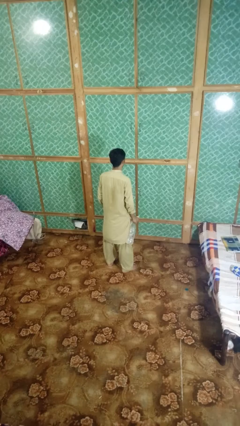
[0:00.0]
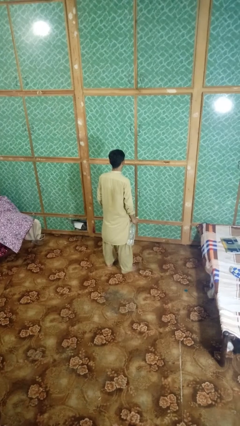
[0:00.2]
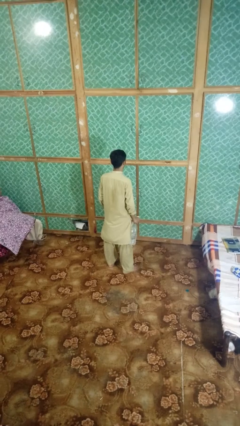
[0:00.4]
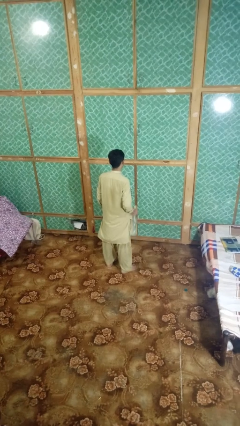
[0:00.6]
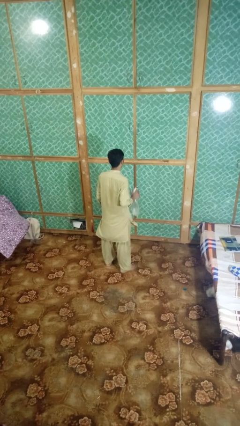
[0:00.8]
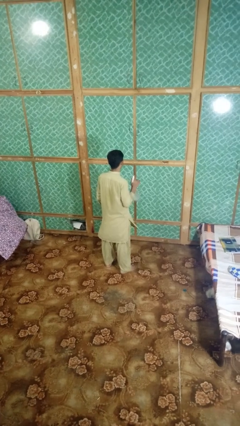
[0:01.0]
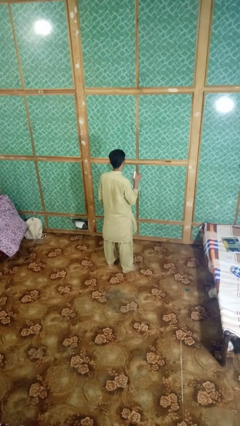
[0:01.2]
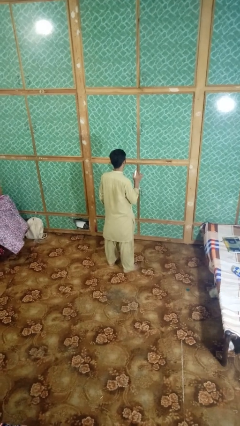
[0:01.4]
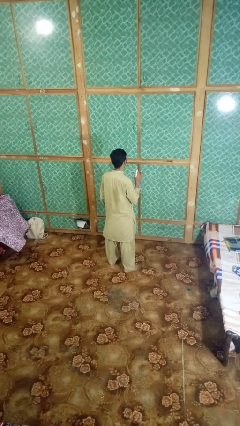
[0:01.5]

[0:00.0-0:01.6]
person sprays from bottle

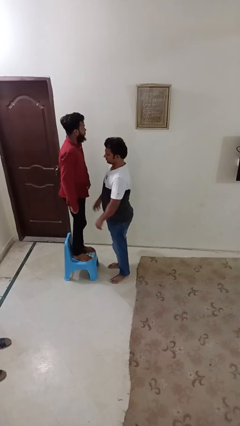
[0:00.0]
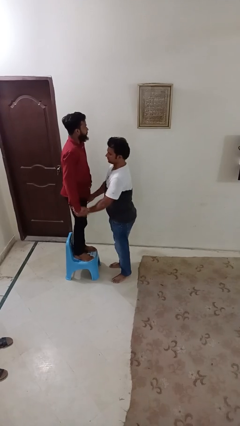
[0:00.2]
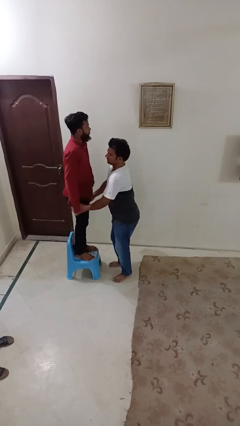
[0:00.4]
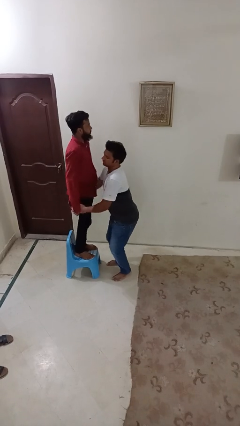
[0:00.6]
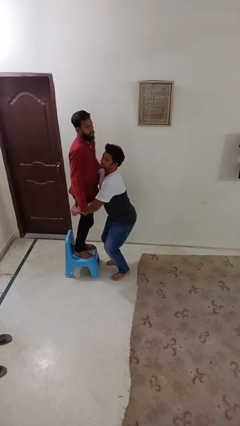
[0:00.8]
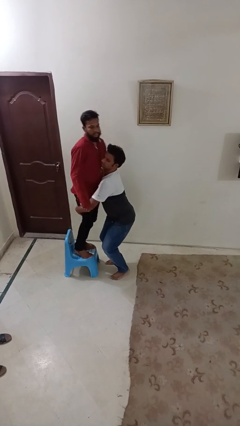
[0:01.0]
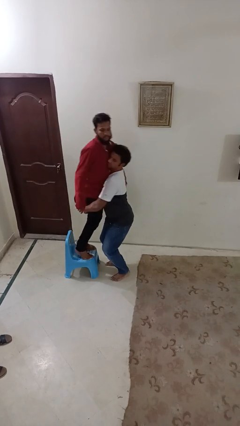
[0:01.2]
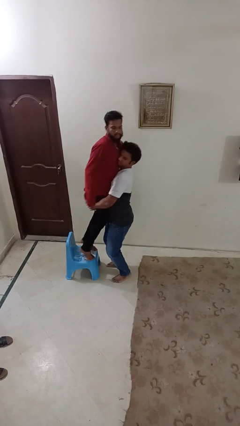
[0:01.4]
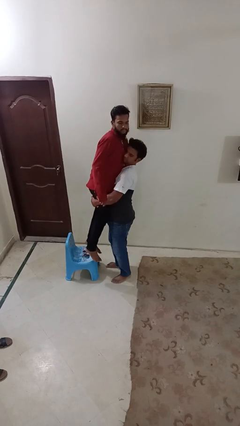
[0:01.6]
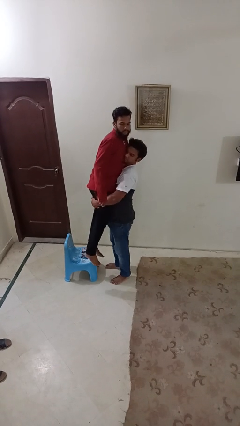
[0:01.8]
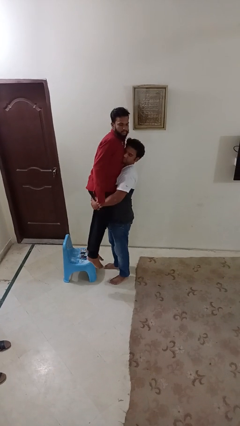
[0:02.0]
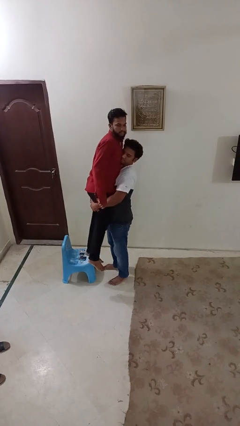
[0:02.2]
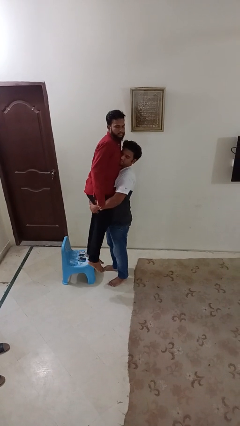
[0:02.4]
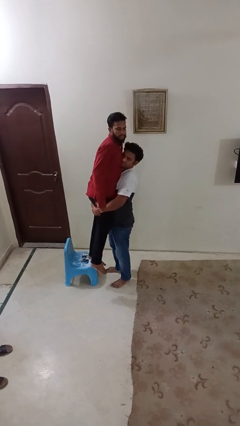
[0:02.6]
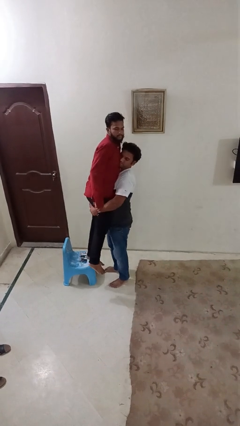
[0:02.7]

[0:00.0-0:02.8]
person picks up person

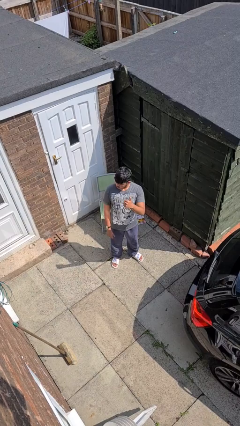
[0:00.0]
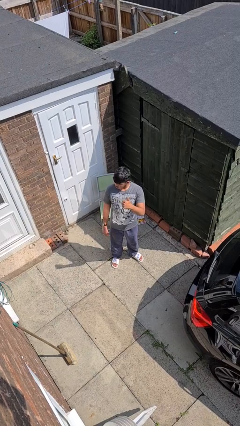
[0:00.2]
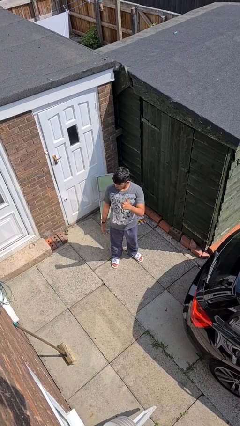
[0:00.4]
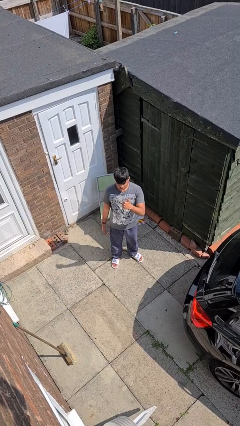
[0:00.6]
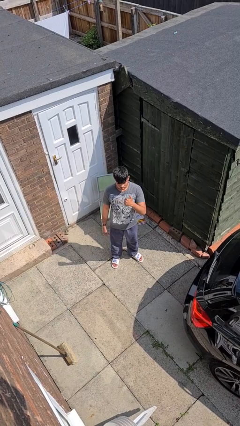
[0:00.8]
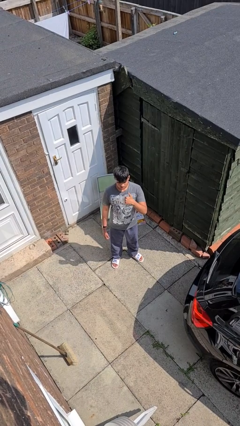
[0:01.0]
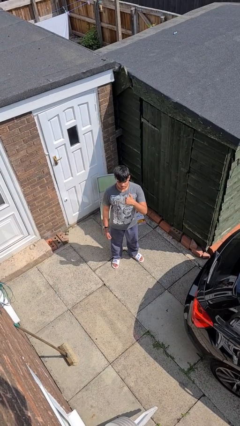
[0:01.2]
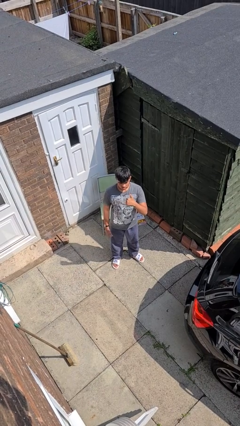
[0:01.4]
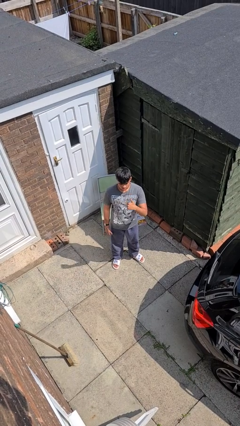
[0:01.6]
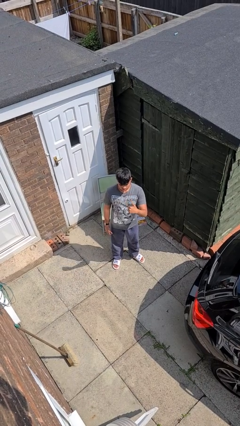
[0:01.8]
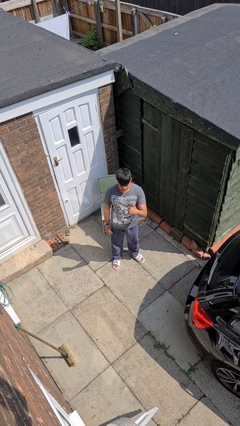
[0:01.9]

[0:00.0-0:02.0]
person gestures thumbs up

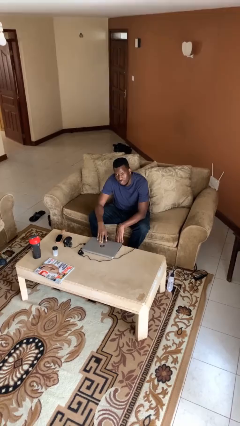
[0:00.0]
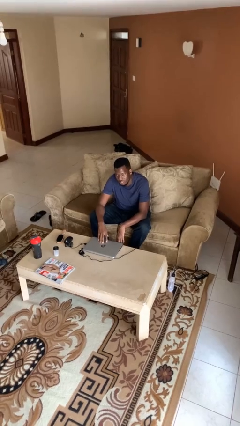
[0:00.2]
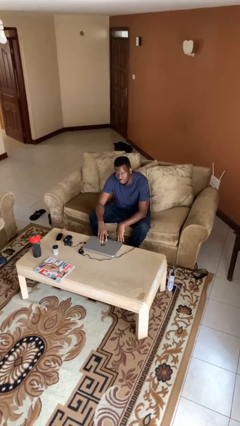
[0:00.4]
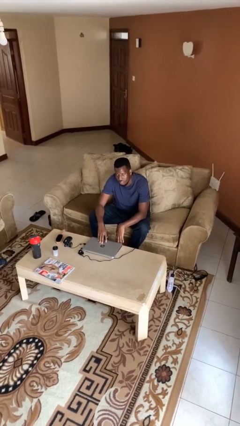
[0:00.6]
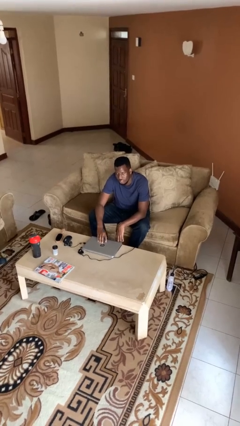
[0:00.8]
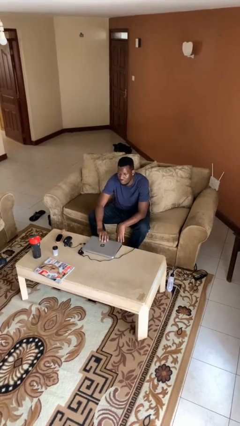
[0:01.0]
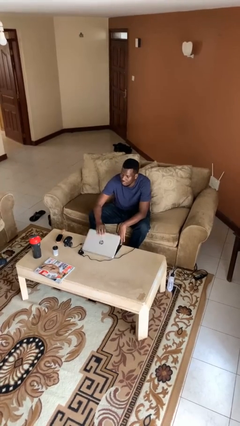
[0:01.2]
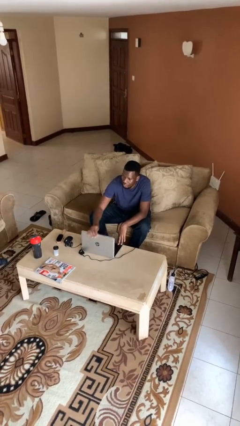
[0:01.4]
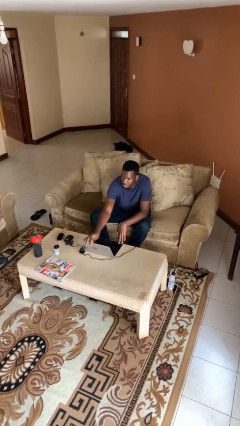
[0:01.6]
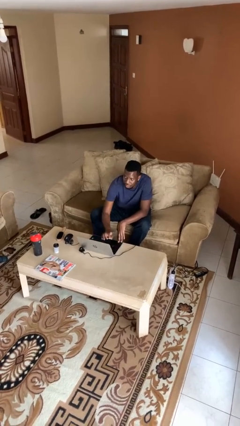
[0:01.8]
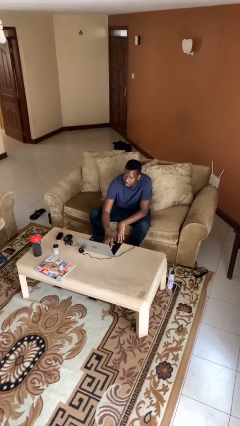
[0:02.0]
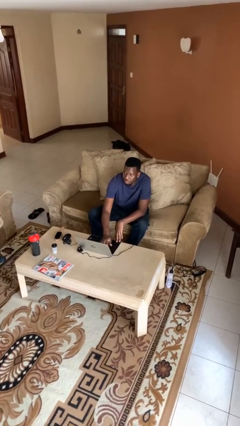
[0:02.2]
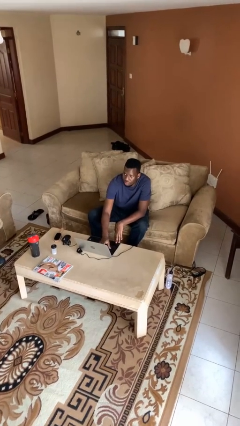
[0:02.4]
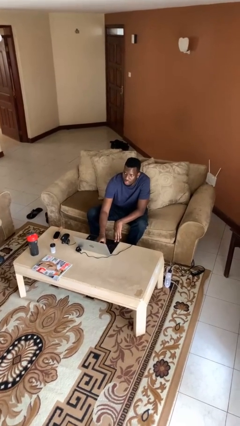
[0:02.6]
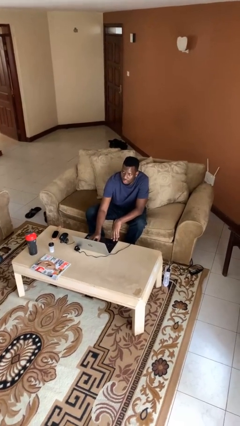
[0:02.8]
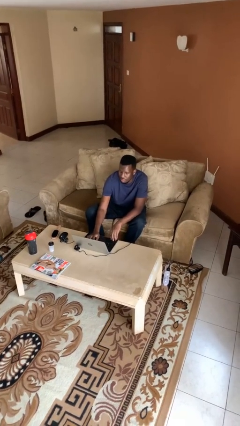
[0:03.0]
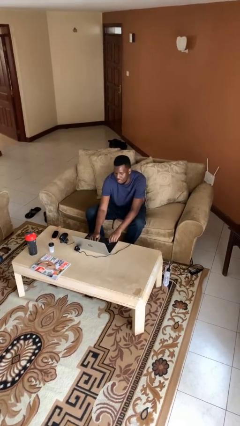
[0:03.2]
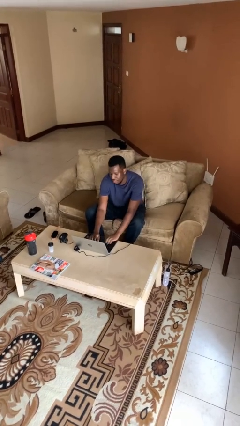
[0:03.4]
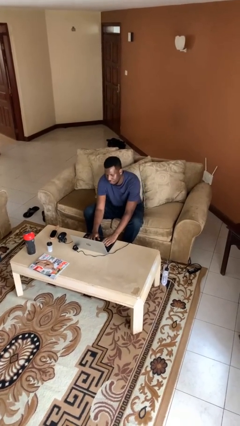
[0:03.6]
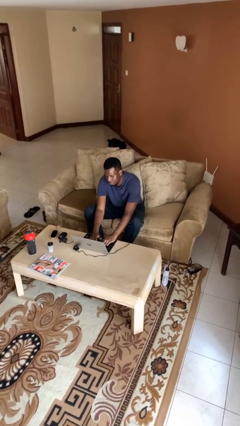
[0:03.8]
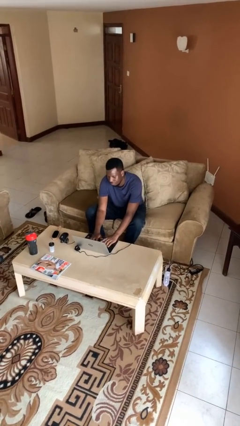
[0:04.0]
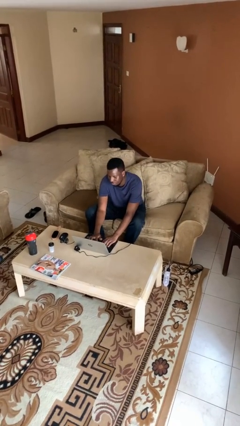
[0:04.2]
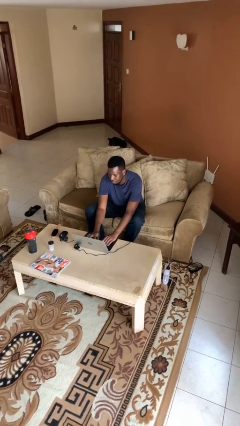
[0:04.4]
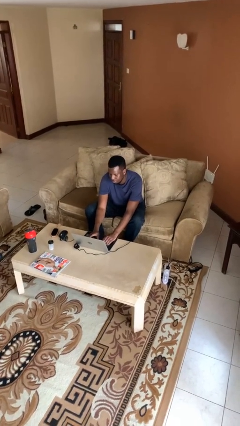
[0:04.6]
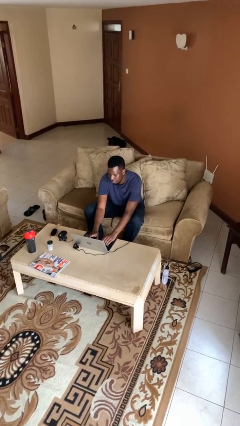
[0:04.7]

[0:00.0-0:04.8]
person interacts with laptop

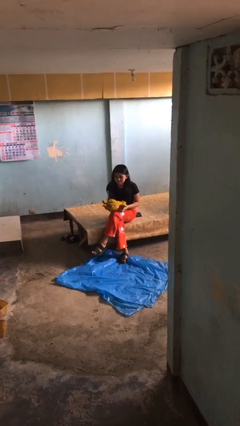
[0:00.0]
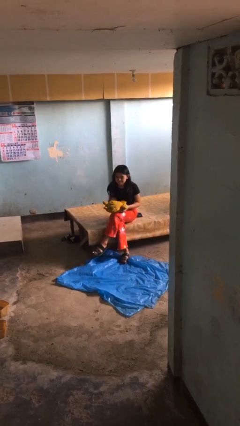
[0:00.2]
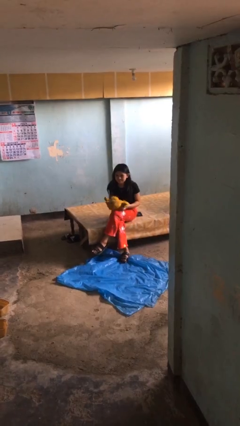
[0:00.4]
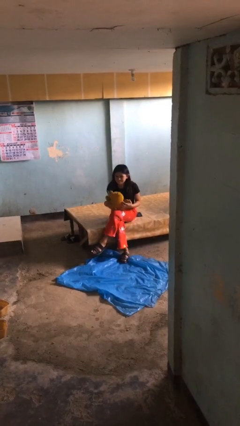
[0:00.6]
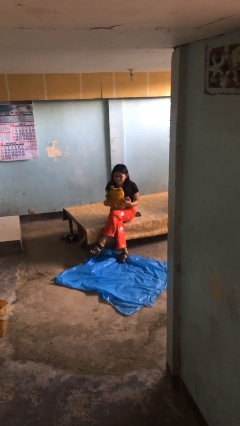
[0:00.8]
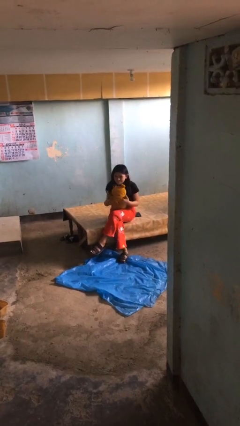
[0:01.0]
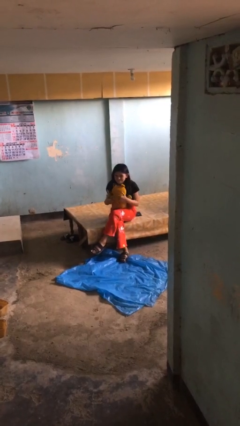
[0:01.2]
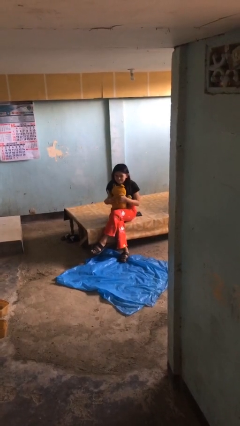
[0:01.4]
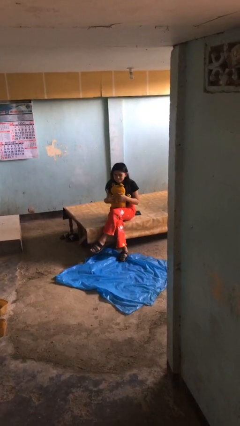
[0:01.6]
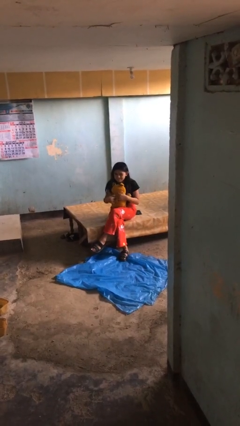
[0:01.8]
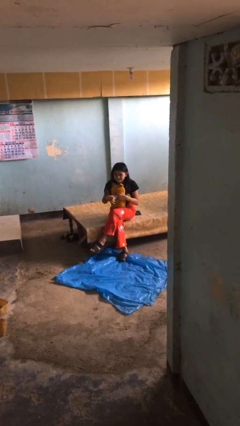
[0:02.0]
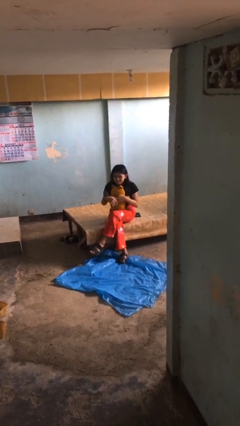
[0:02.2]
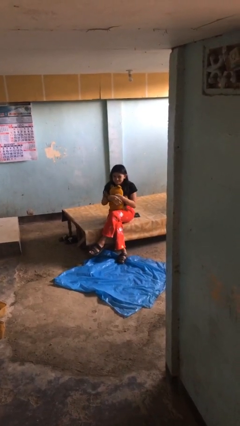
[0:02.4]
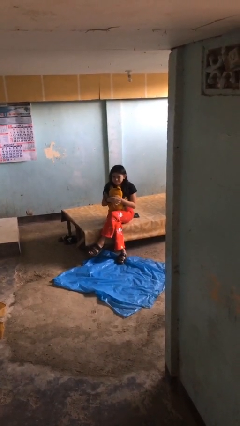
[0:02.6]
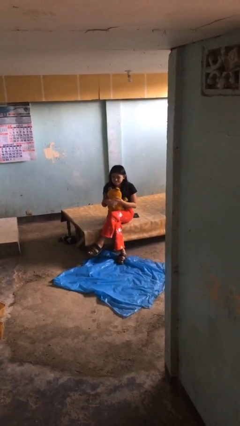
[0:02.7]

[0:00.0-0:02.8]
person hugs stuffed animal

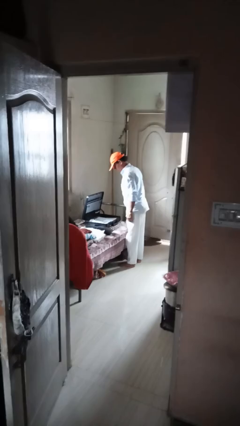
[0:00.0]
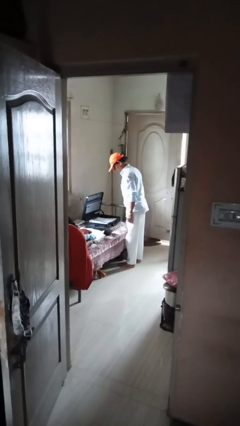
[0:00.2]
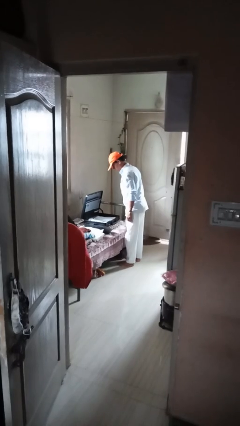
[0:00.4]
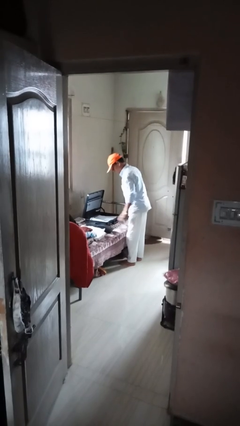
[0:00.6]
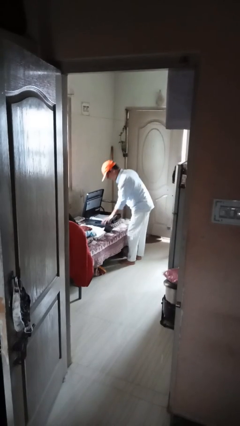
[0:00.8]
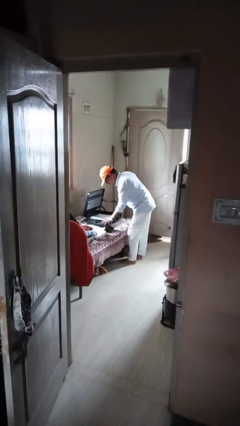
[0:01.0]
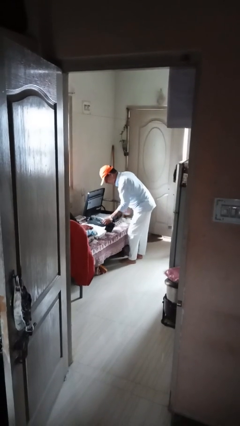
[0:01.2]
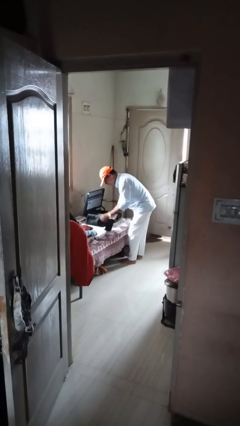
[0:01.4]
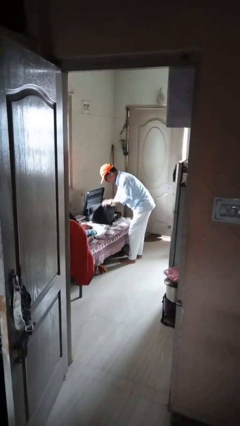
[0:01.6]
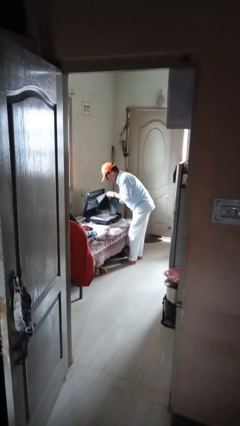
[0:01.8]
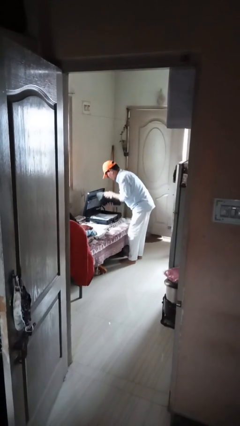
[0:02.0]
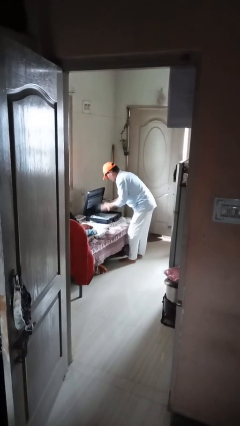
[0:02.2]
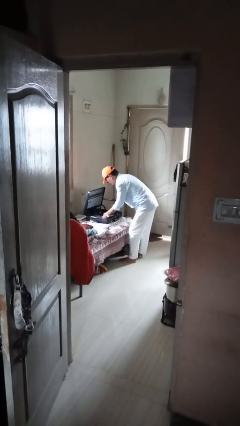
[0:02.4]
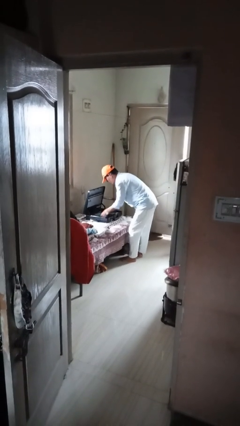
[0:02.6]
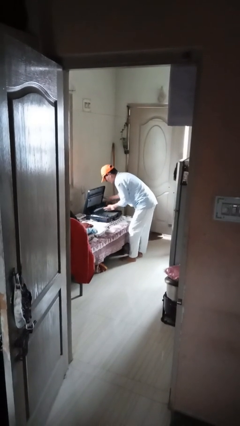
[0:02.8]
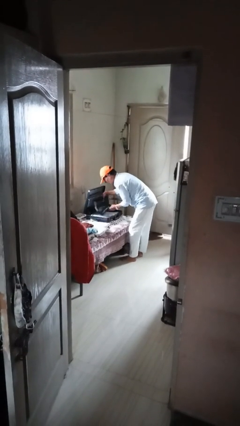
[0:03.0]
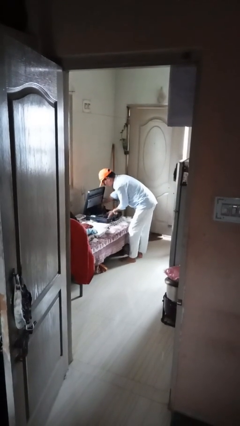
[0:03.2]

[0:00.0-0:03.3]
person loads clothes into suitcase

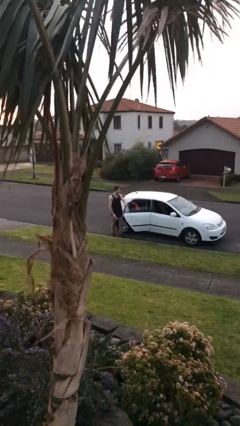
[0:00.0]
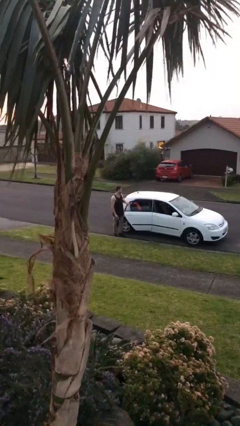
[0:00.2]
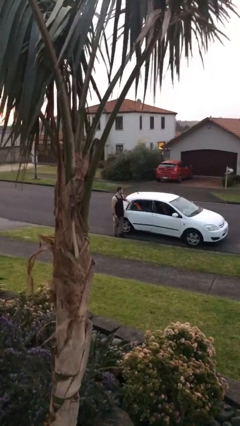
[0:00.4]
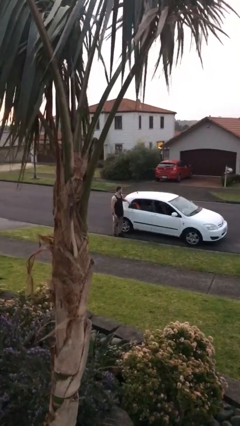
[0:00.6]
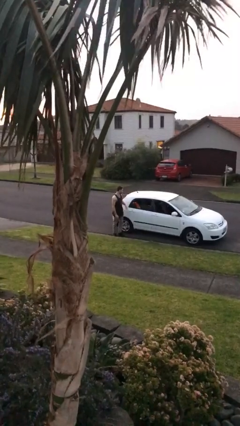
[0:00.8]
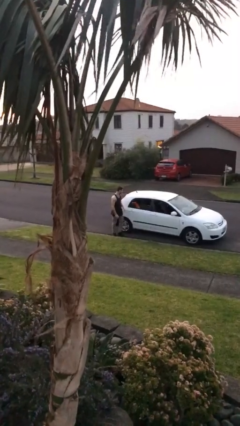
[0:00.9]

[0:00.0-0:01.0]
person closes car door
